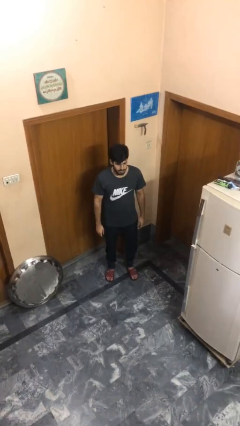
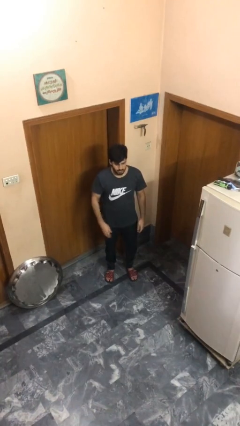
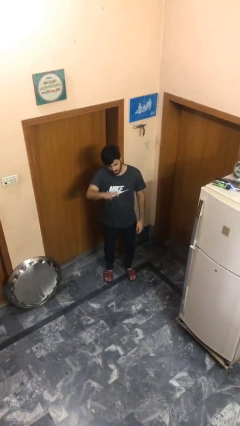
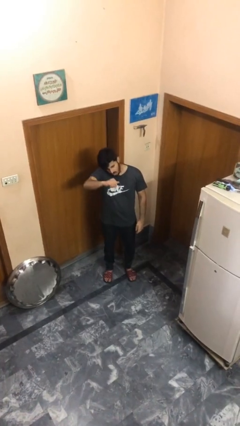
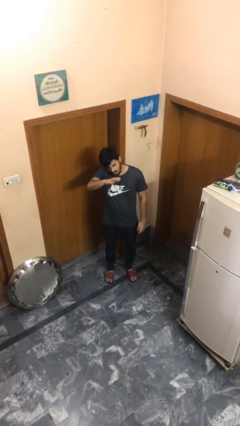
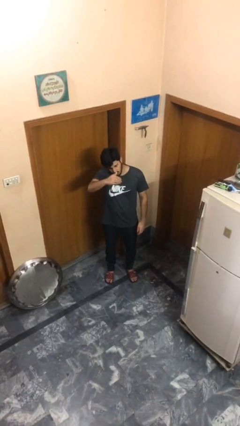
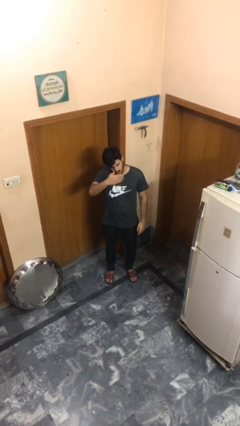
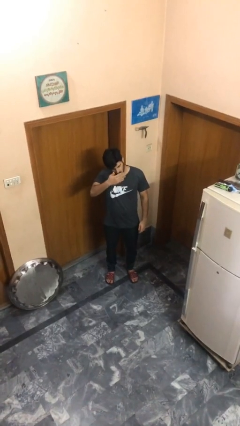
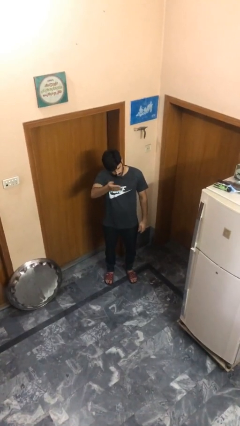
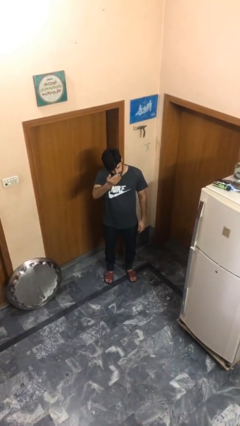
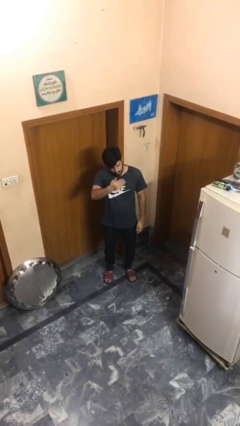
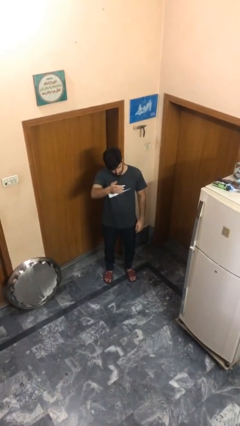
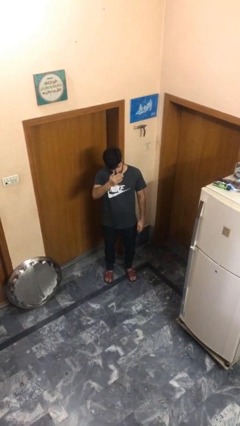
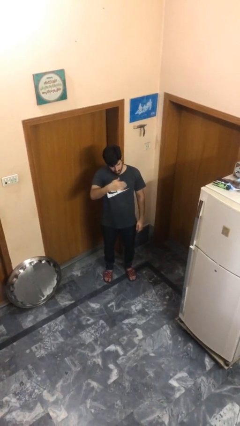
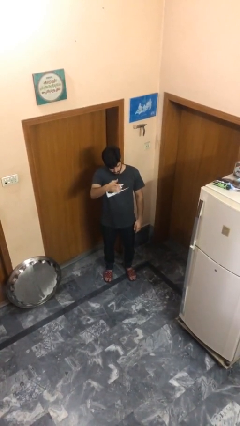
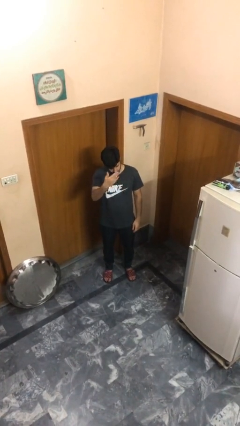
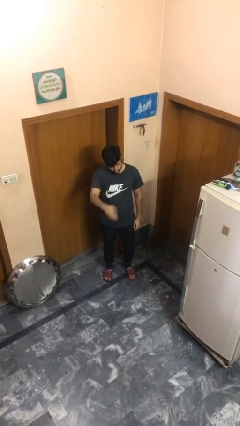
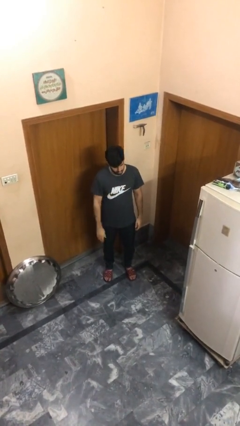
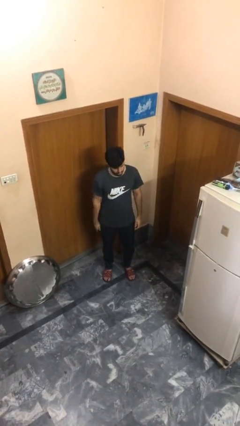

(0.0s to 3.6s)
person gestures come here

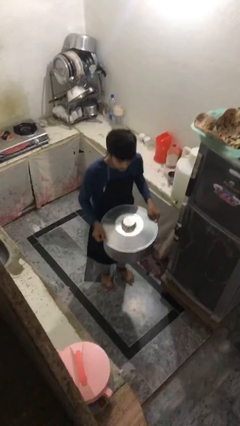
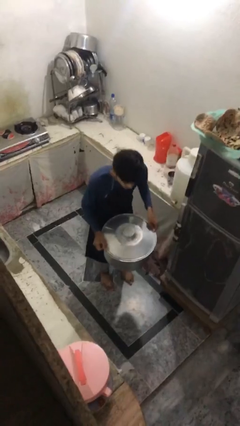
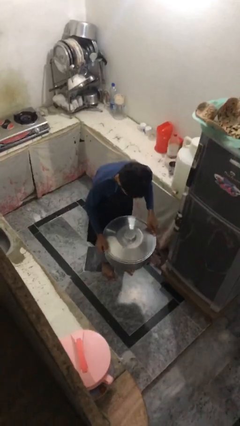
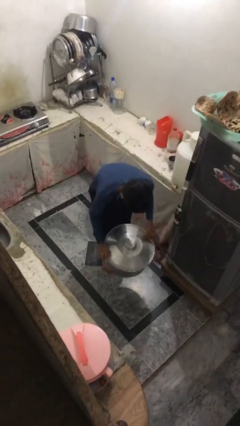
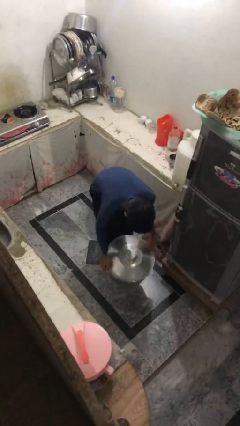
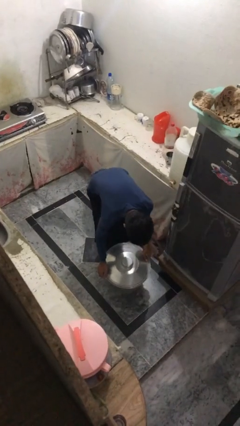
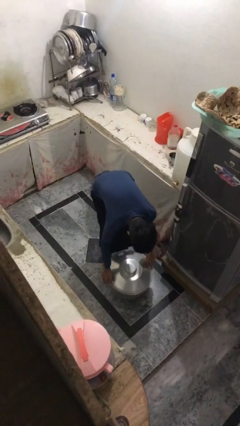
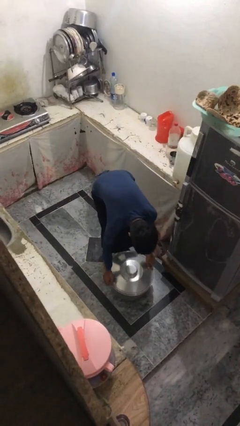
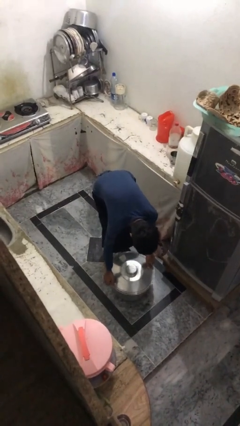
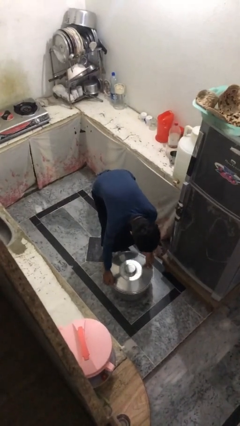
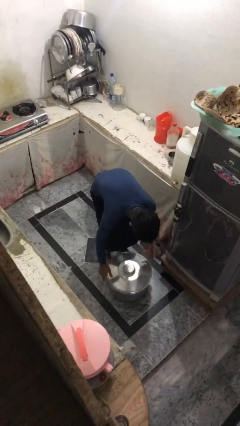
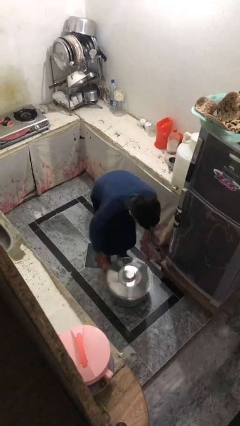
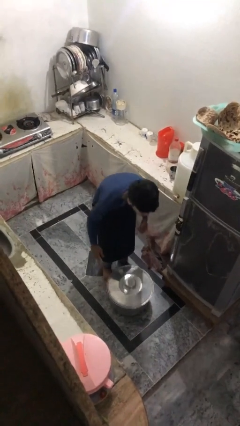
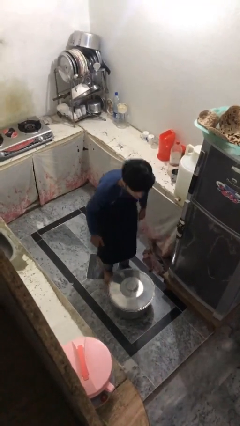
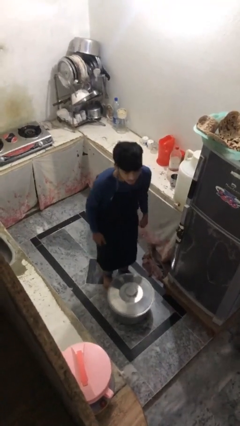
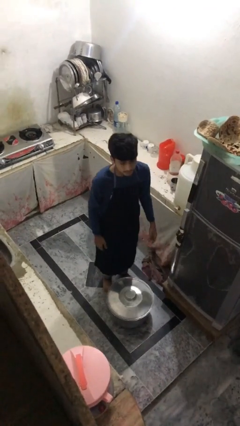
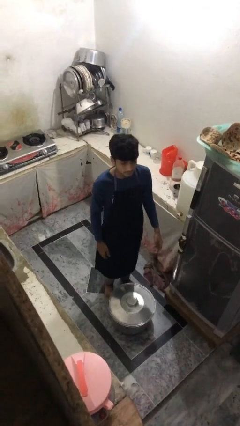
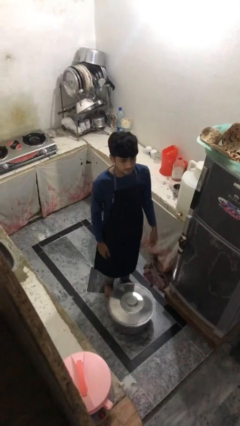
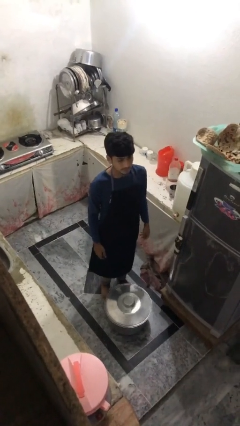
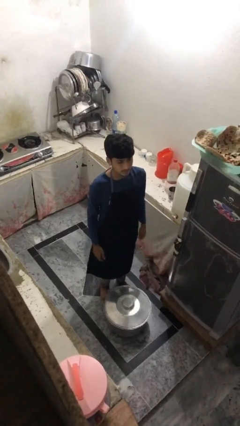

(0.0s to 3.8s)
person puts down object on floor

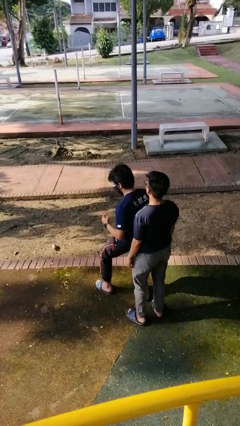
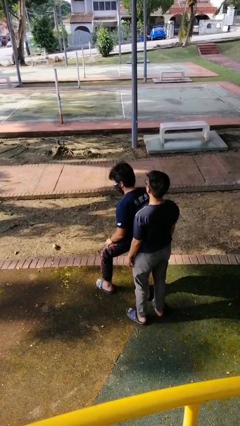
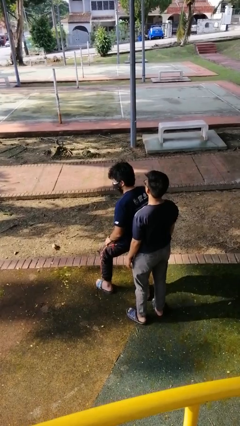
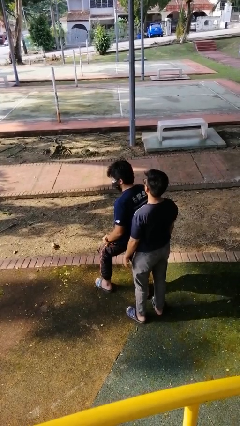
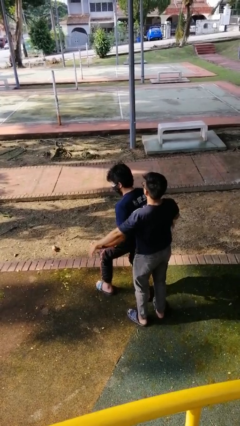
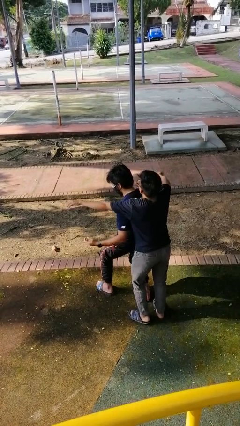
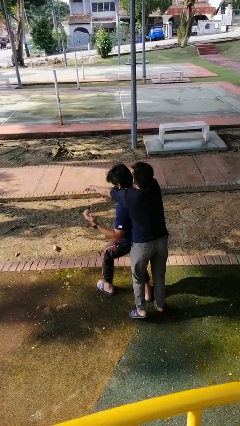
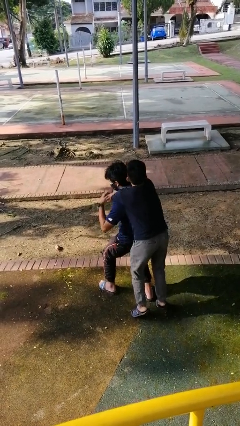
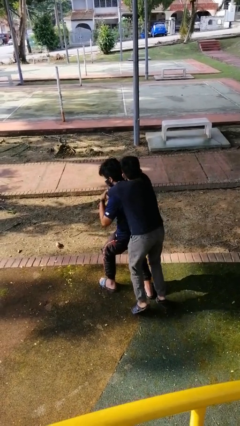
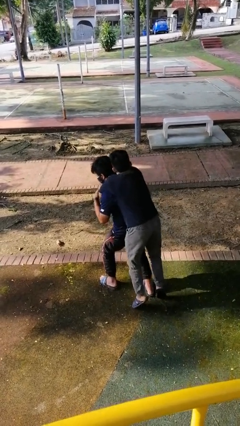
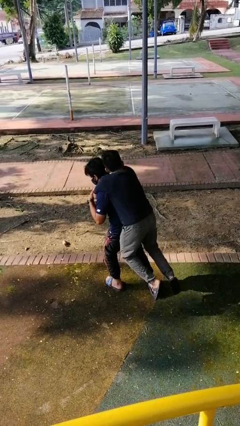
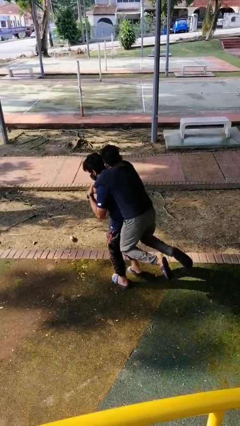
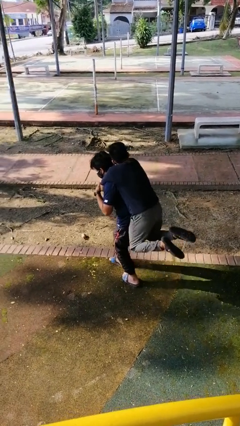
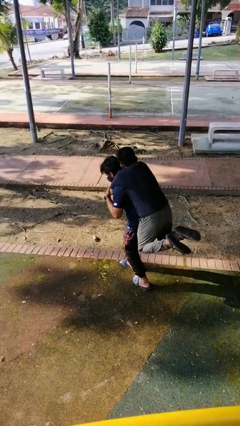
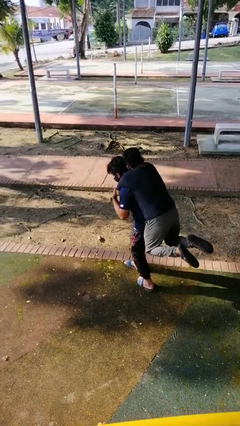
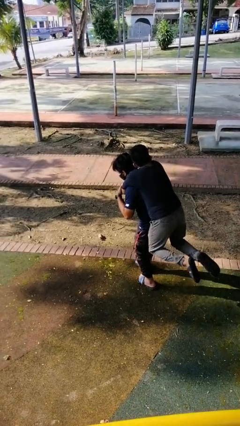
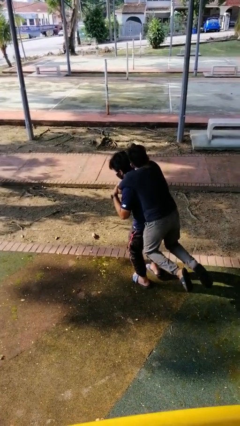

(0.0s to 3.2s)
person carries person over shoulder

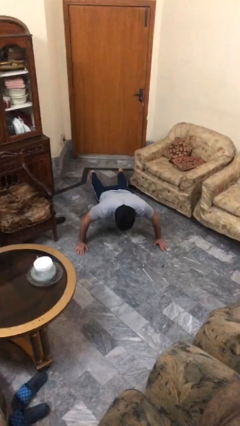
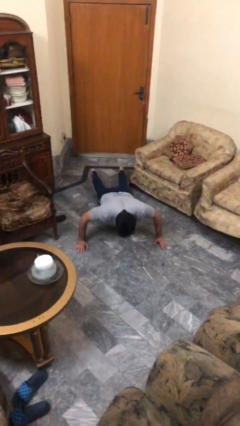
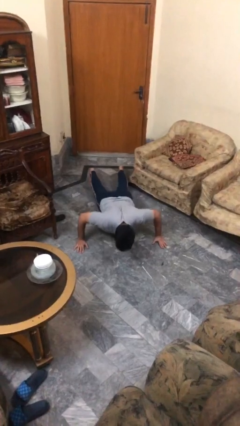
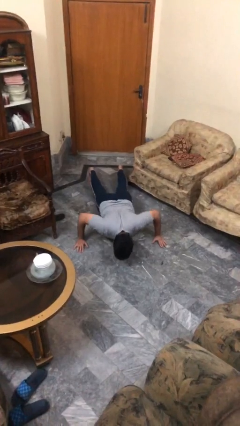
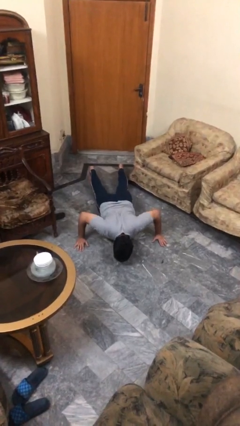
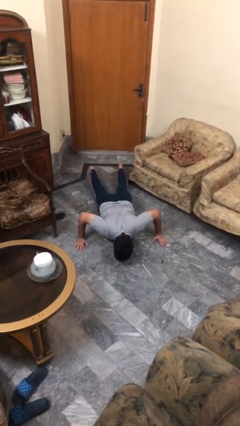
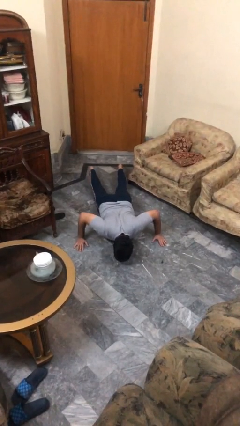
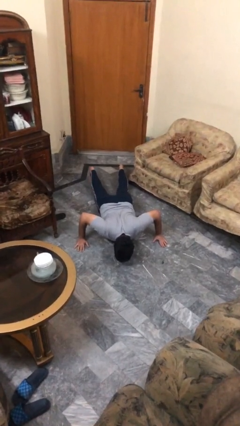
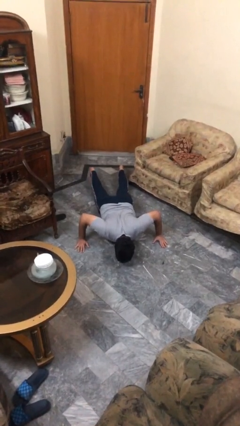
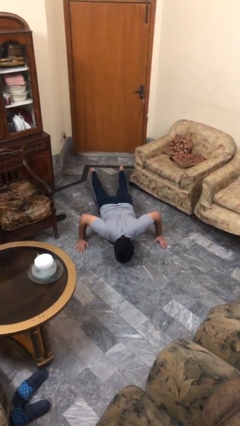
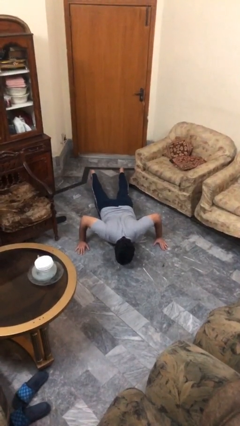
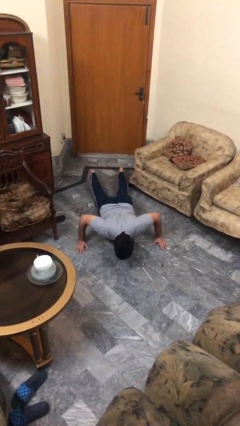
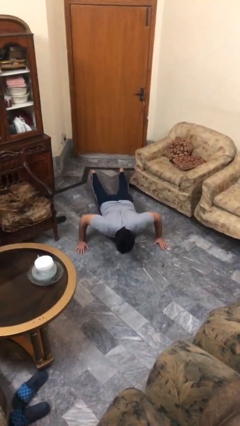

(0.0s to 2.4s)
person exercises with pushup

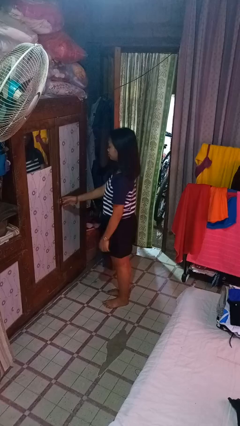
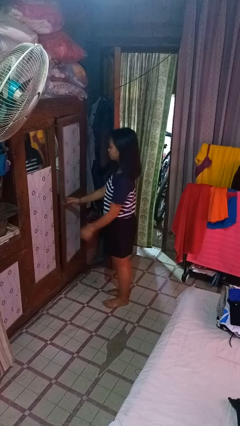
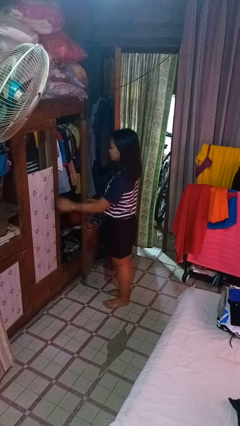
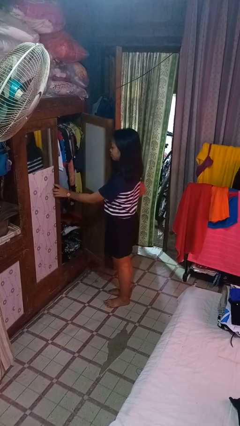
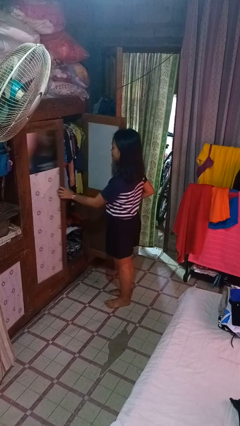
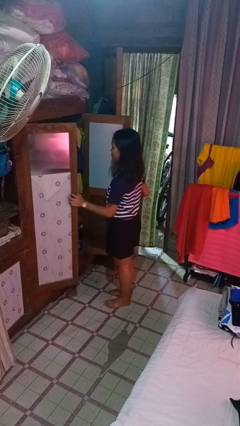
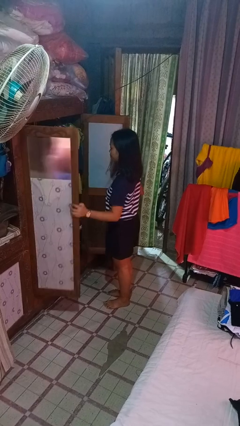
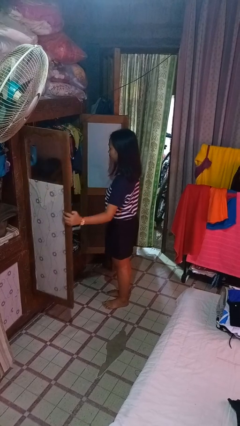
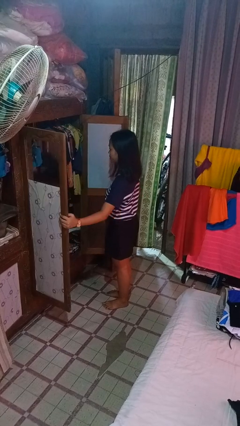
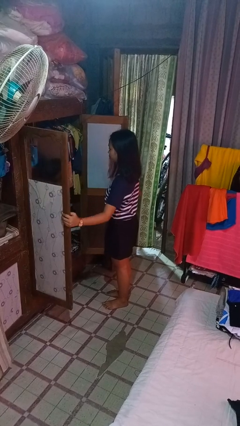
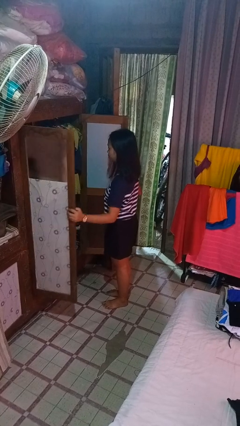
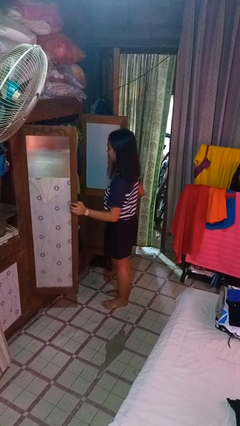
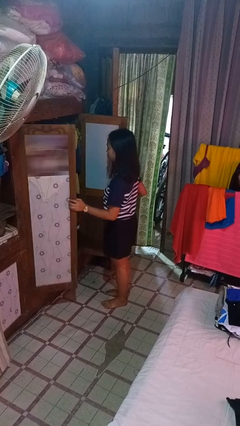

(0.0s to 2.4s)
person opens closet door

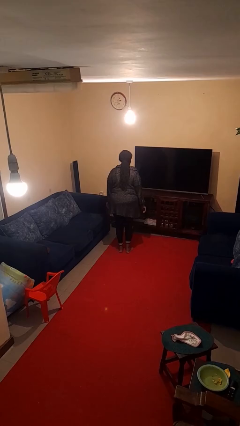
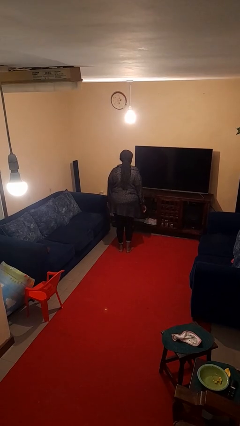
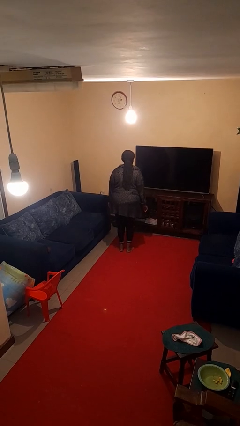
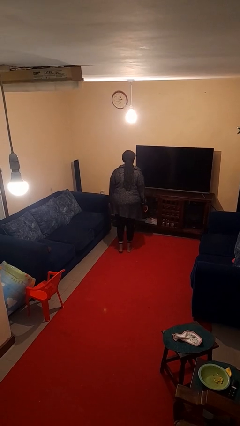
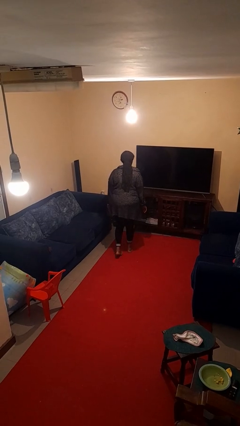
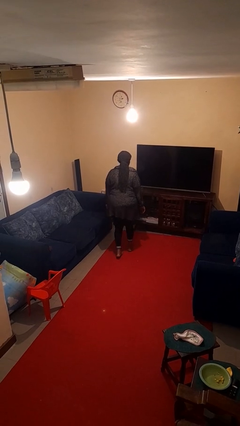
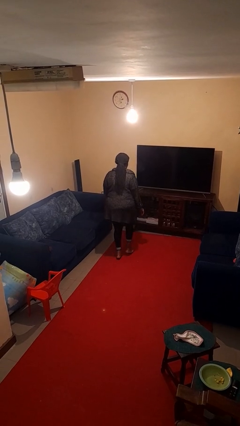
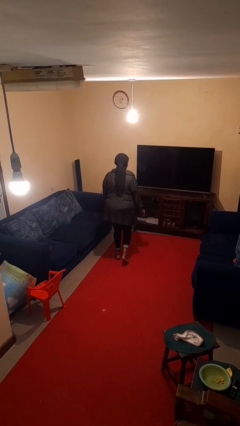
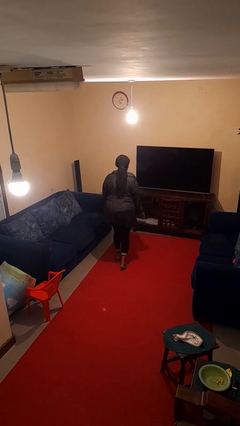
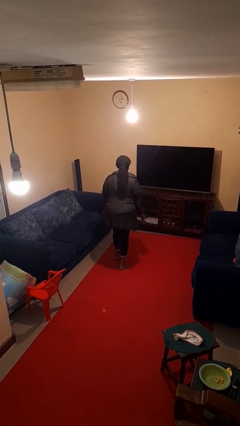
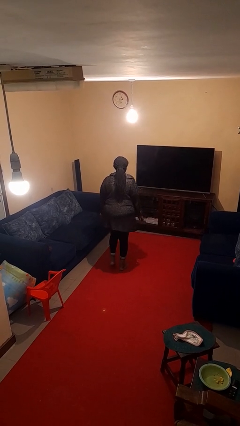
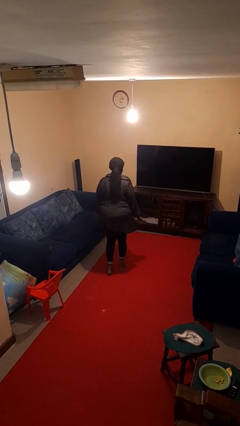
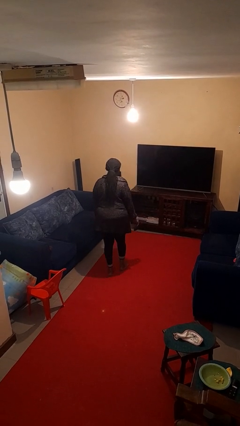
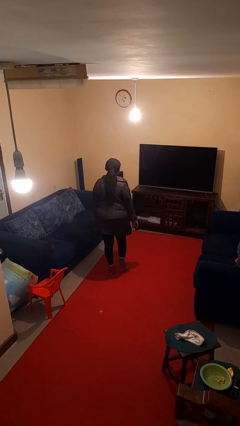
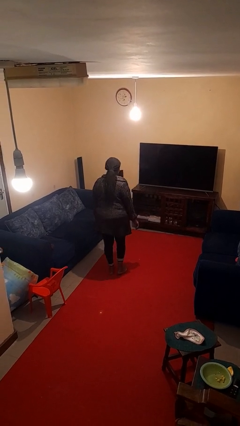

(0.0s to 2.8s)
person walks tiptoe
